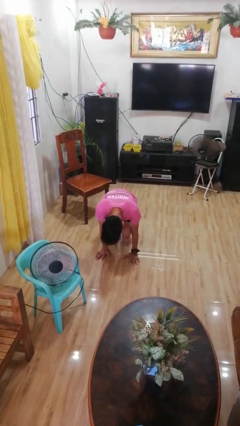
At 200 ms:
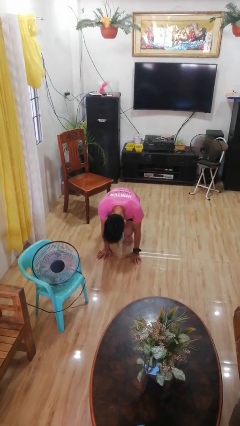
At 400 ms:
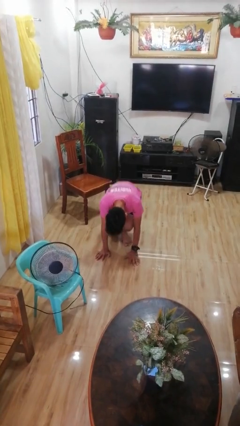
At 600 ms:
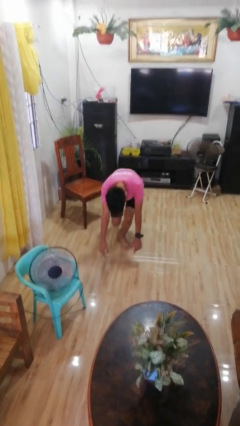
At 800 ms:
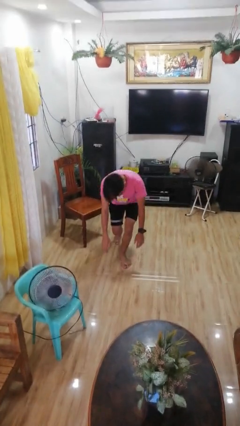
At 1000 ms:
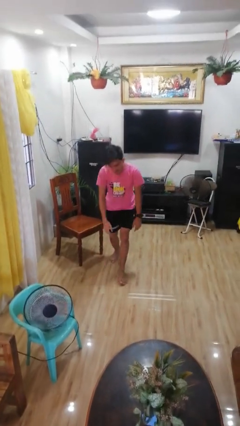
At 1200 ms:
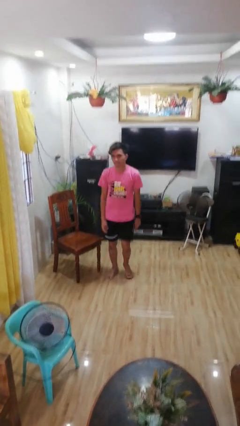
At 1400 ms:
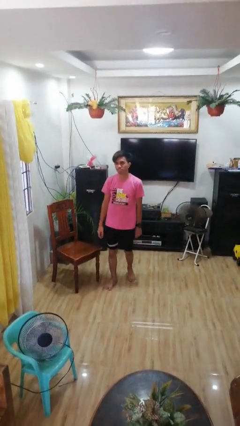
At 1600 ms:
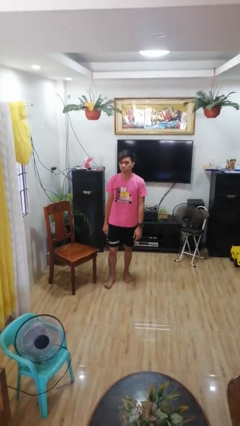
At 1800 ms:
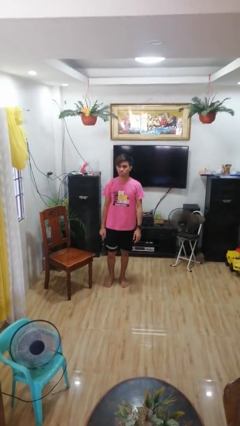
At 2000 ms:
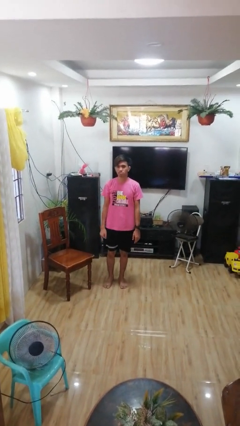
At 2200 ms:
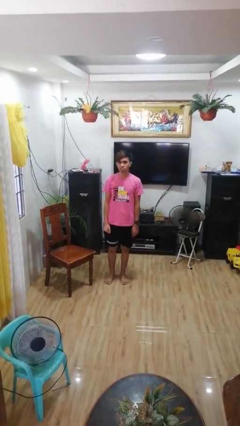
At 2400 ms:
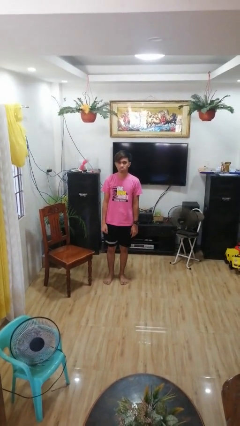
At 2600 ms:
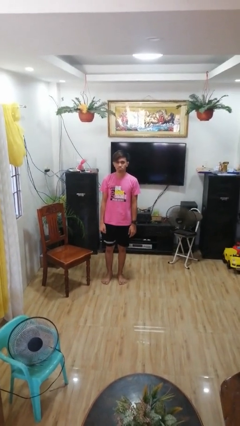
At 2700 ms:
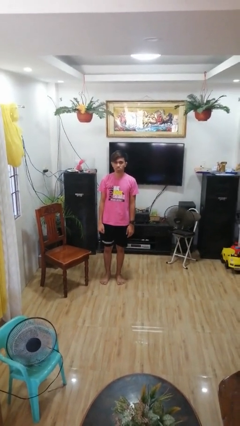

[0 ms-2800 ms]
person stands up from floor

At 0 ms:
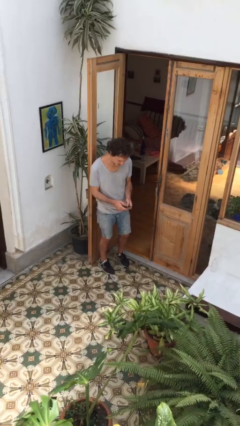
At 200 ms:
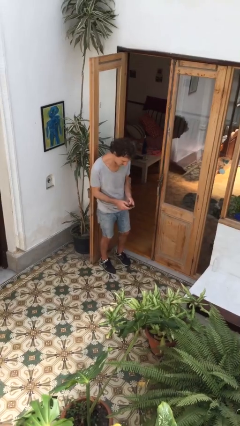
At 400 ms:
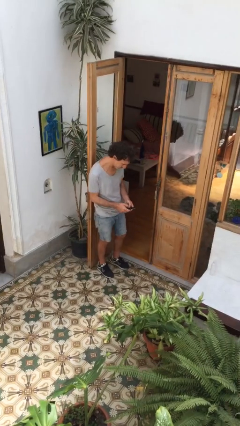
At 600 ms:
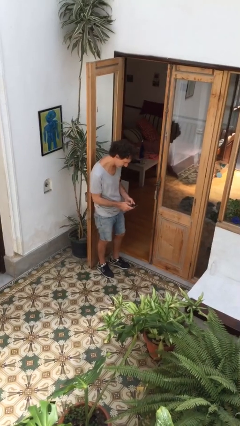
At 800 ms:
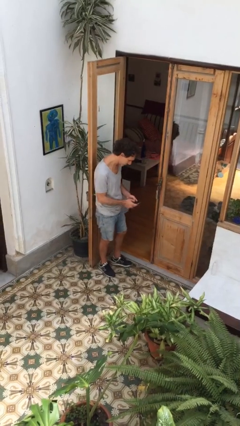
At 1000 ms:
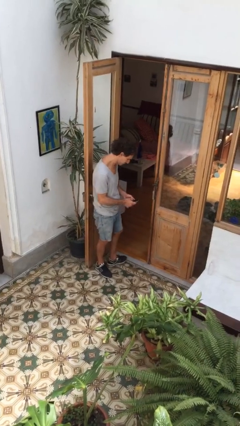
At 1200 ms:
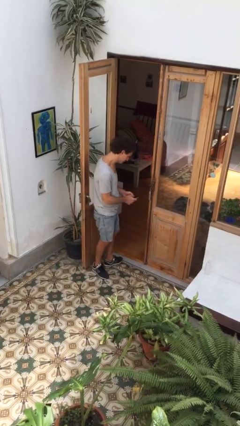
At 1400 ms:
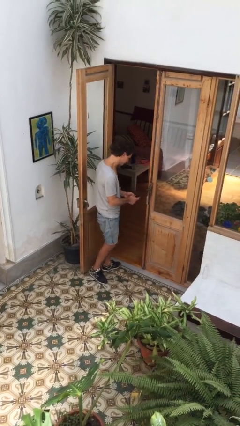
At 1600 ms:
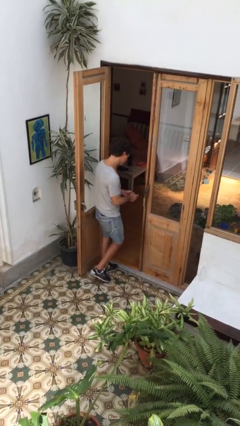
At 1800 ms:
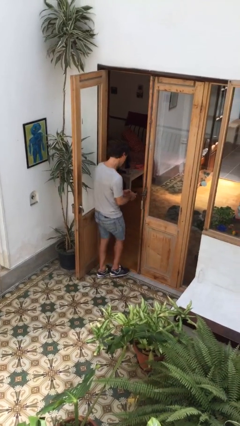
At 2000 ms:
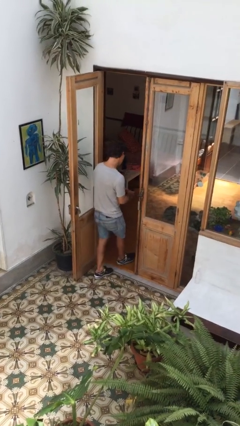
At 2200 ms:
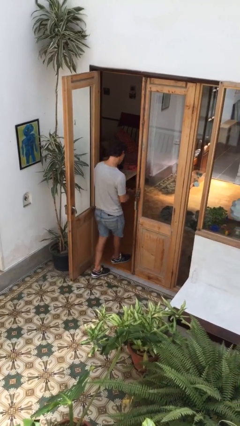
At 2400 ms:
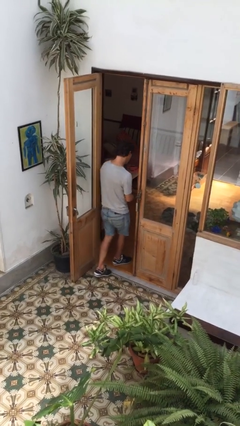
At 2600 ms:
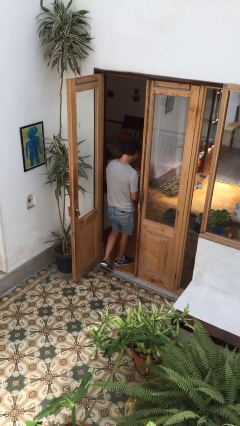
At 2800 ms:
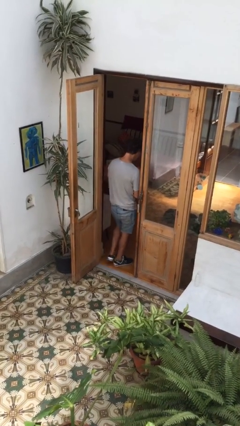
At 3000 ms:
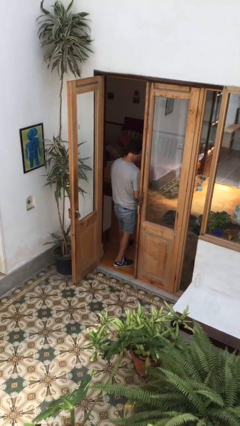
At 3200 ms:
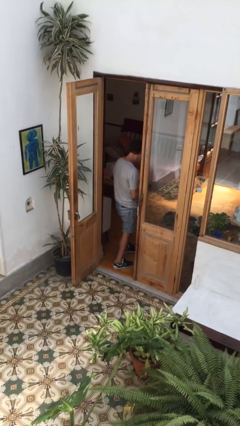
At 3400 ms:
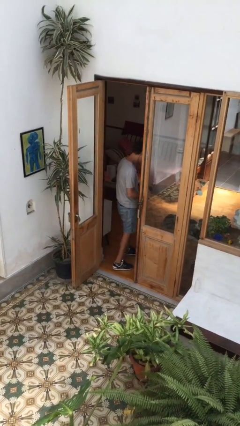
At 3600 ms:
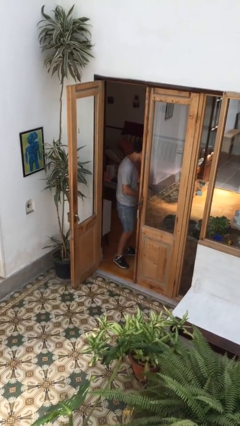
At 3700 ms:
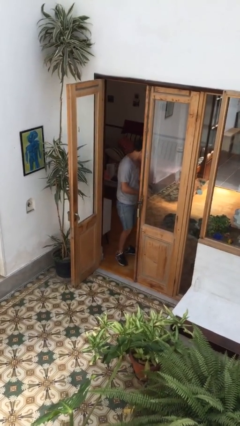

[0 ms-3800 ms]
person exits scene through structure

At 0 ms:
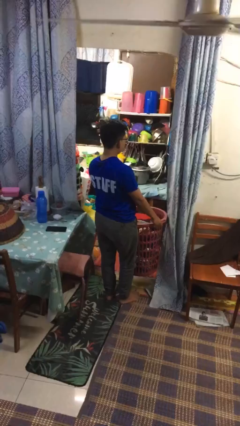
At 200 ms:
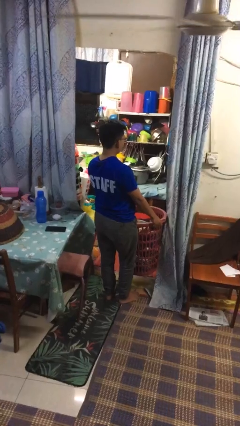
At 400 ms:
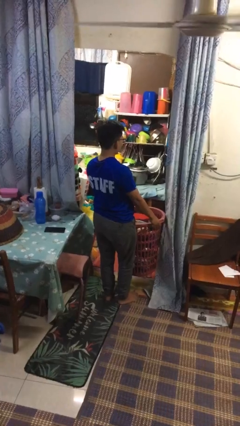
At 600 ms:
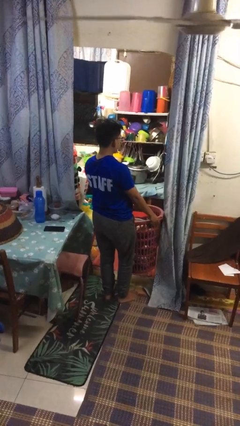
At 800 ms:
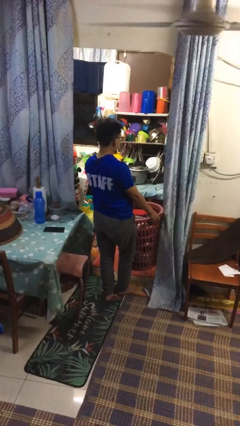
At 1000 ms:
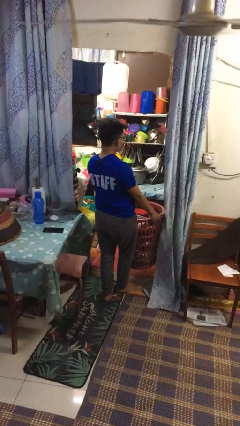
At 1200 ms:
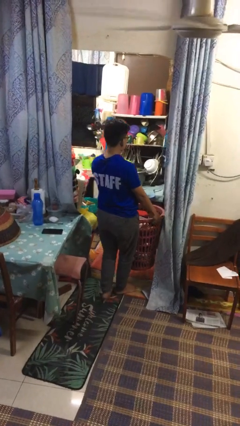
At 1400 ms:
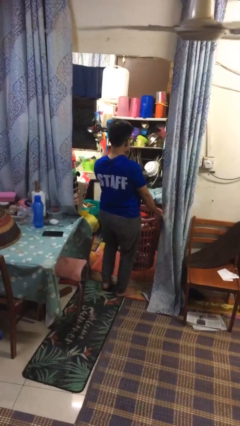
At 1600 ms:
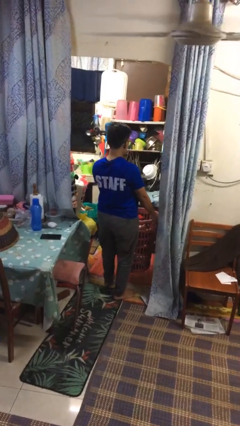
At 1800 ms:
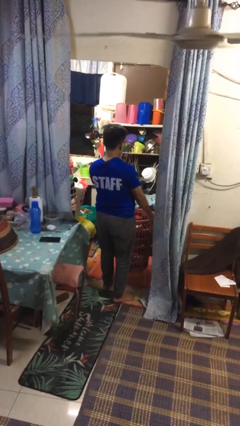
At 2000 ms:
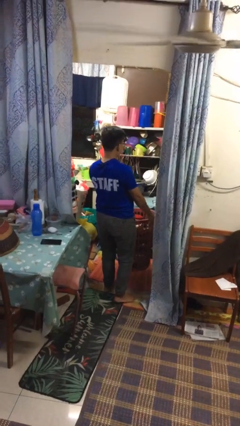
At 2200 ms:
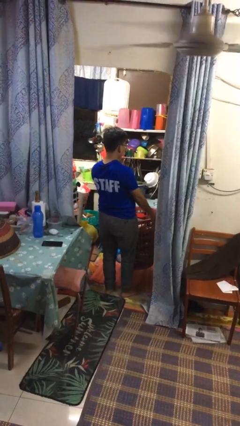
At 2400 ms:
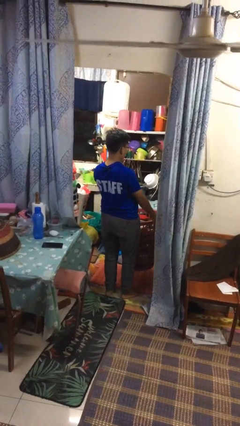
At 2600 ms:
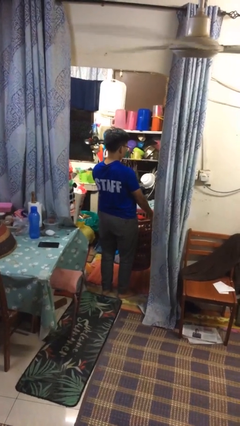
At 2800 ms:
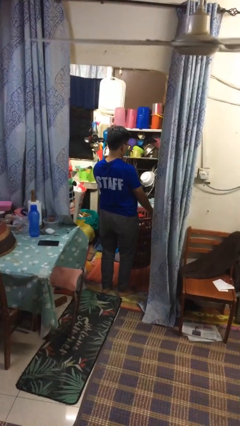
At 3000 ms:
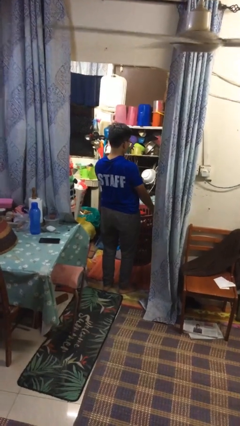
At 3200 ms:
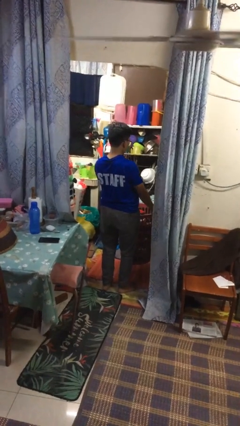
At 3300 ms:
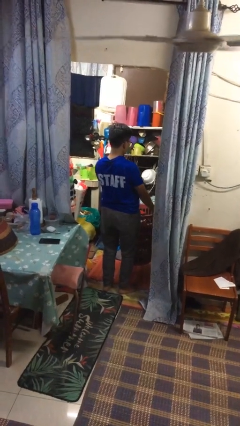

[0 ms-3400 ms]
person carries laundry basket

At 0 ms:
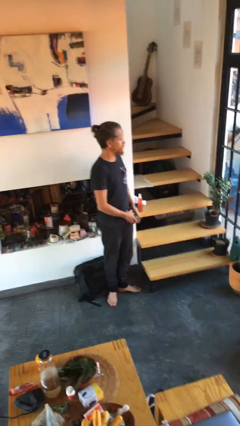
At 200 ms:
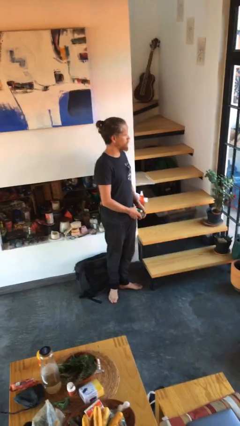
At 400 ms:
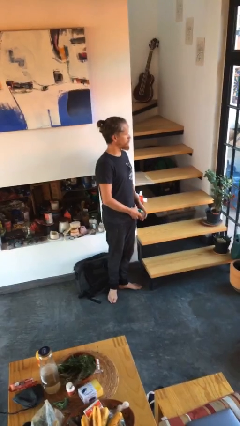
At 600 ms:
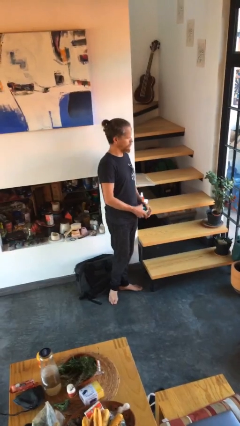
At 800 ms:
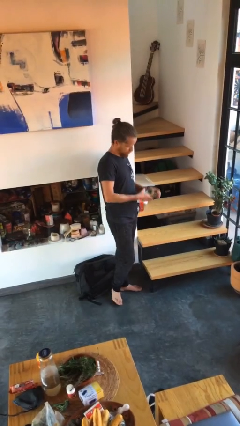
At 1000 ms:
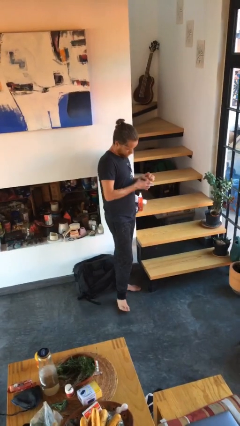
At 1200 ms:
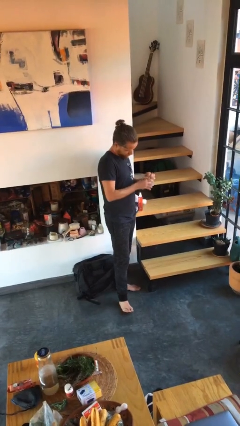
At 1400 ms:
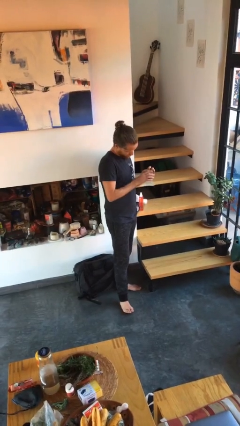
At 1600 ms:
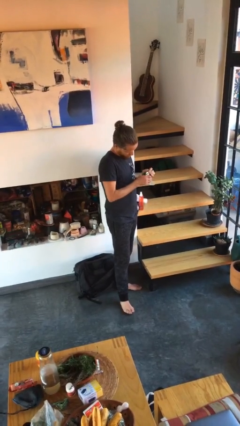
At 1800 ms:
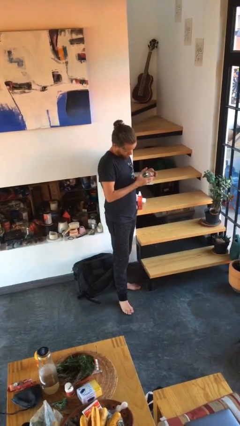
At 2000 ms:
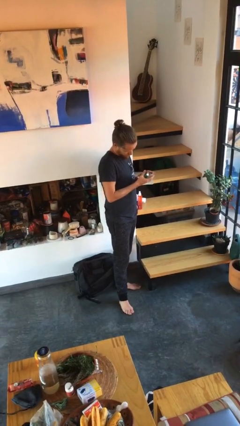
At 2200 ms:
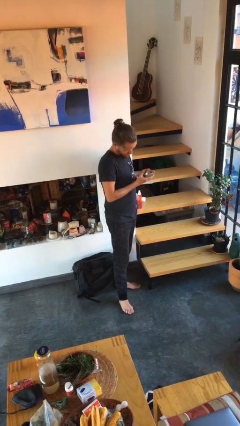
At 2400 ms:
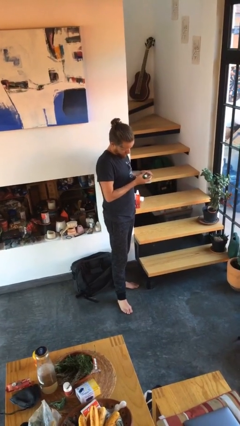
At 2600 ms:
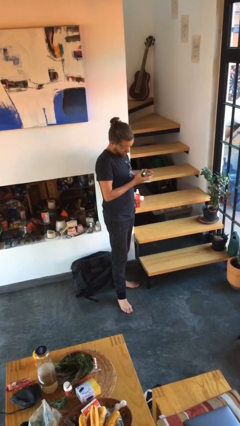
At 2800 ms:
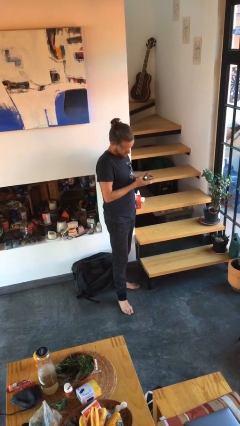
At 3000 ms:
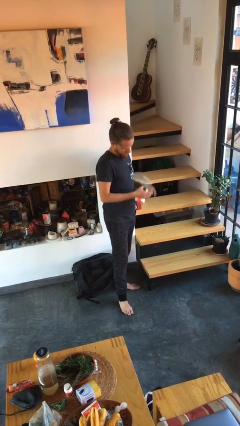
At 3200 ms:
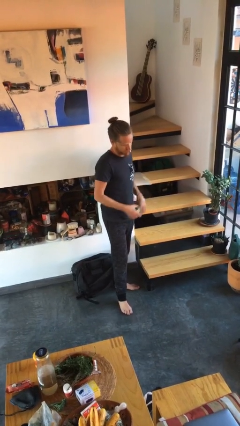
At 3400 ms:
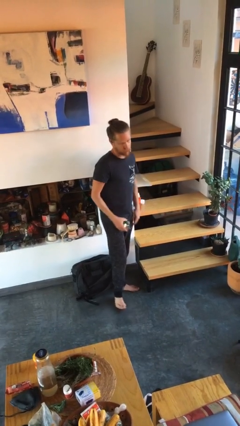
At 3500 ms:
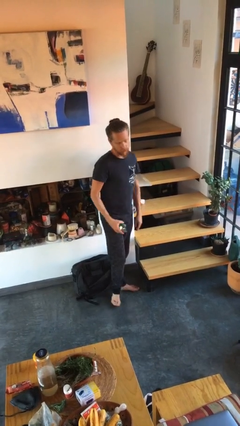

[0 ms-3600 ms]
person squeezes object

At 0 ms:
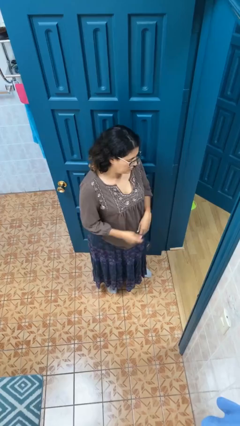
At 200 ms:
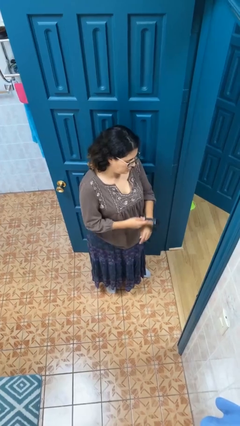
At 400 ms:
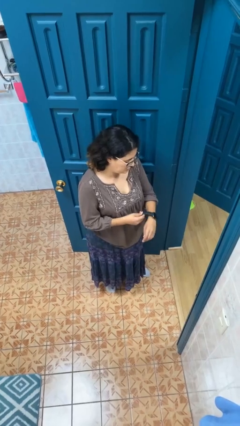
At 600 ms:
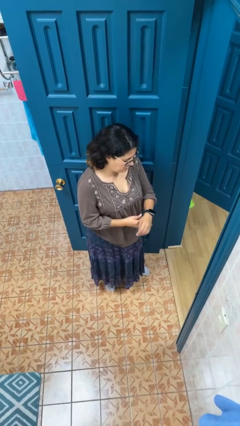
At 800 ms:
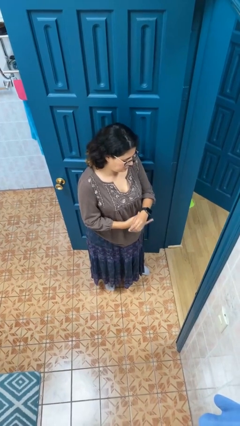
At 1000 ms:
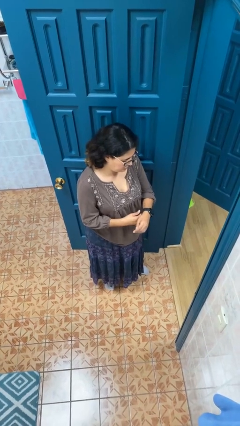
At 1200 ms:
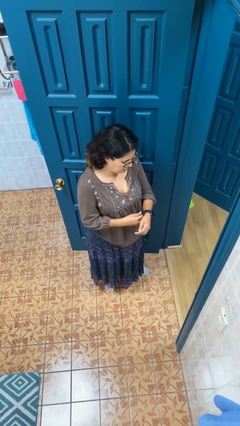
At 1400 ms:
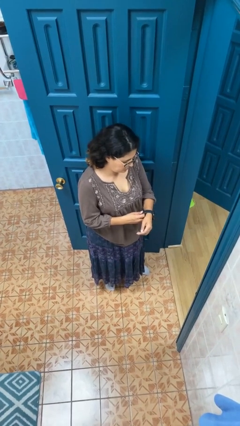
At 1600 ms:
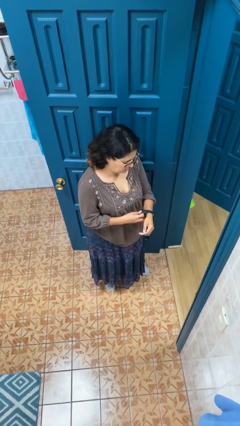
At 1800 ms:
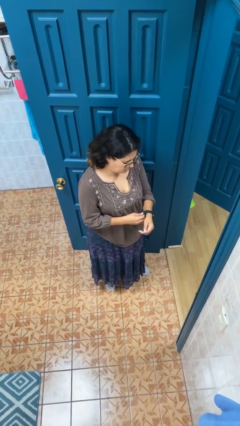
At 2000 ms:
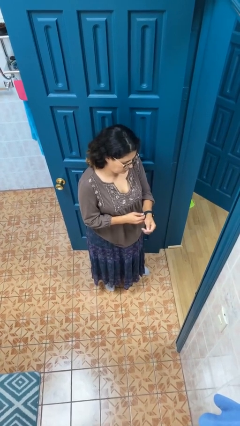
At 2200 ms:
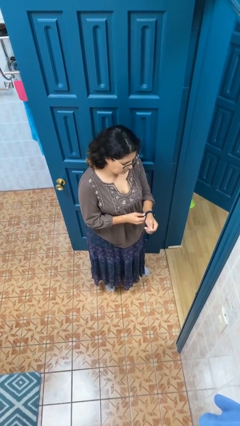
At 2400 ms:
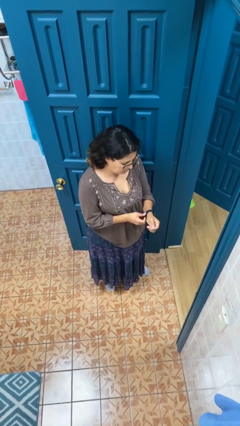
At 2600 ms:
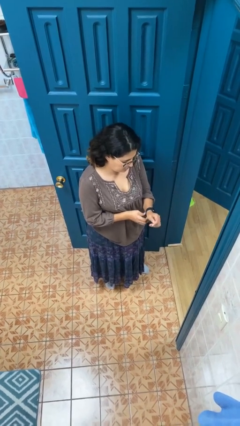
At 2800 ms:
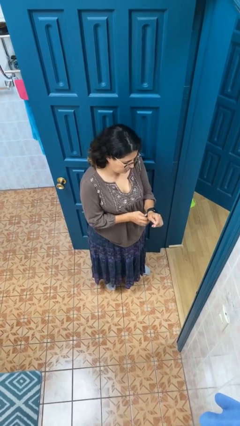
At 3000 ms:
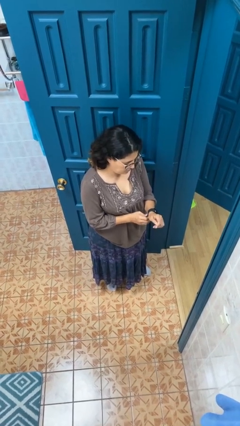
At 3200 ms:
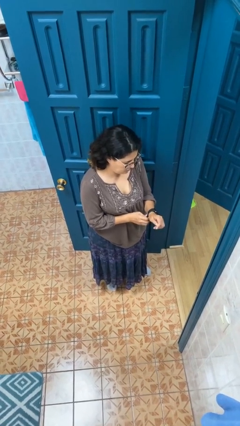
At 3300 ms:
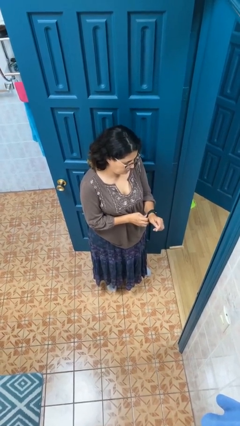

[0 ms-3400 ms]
person puts on wristwatch

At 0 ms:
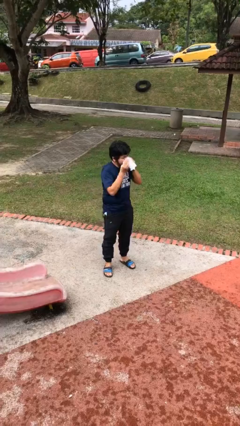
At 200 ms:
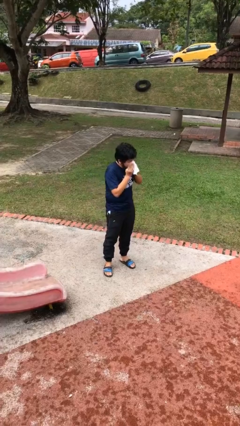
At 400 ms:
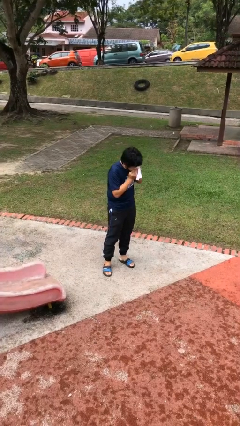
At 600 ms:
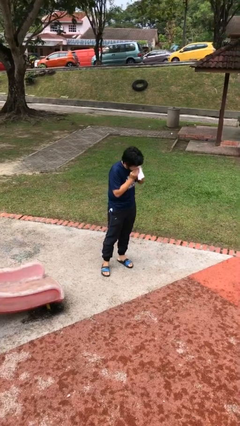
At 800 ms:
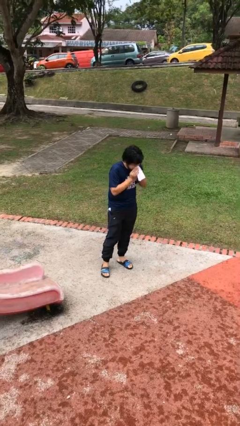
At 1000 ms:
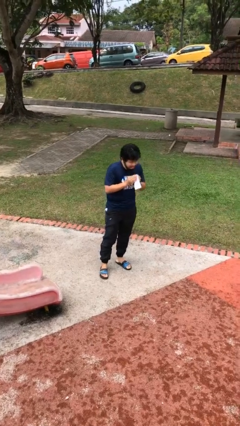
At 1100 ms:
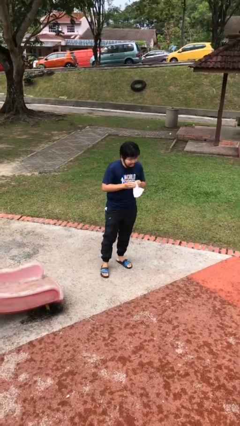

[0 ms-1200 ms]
person blows nose
